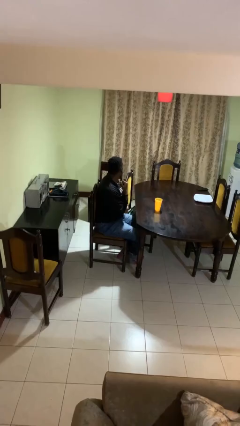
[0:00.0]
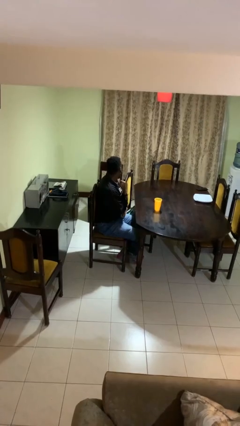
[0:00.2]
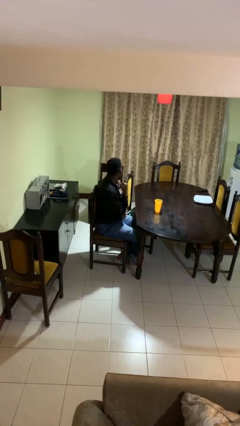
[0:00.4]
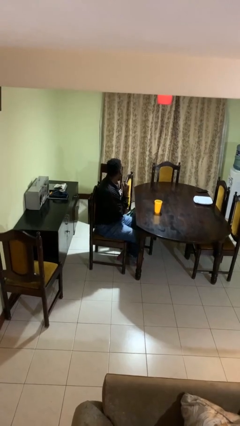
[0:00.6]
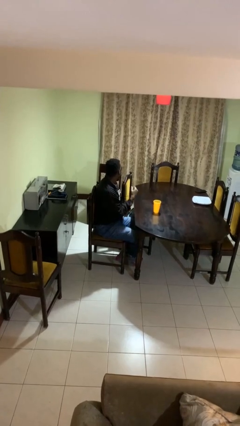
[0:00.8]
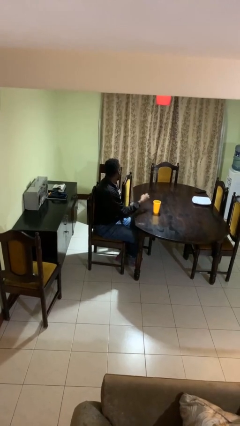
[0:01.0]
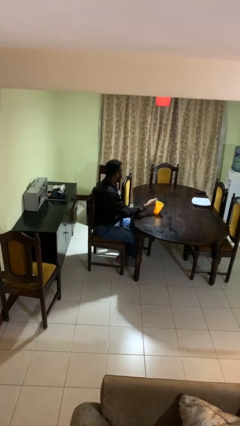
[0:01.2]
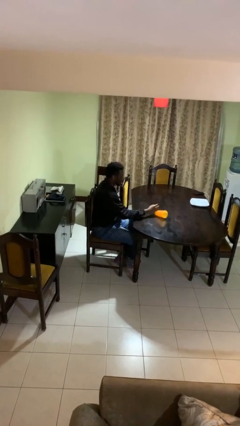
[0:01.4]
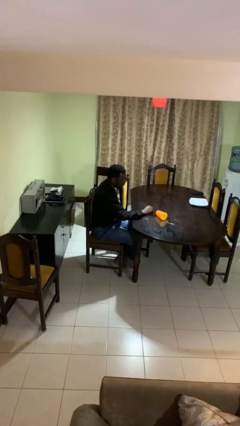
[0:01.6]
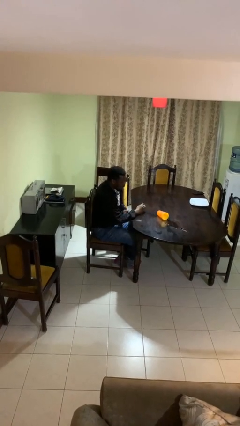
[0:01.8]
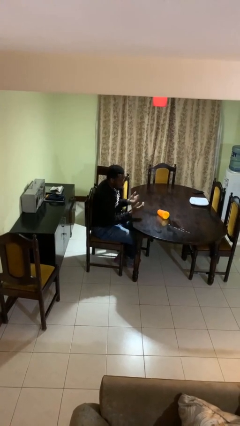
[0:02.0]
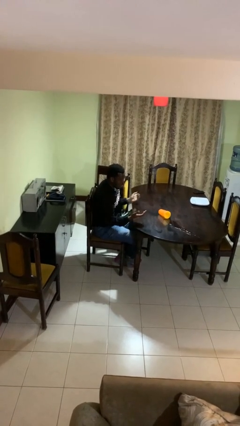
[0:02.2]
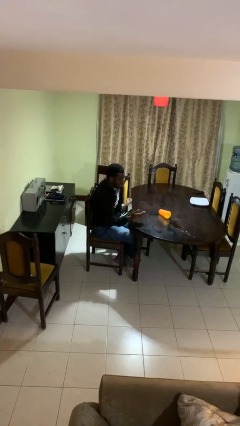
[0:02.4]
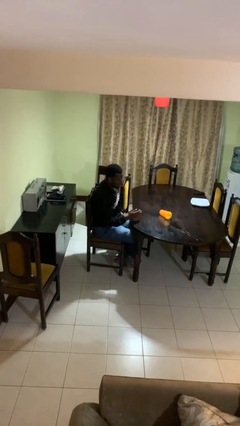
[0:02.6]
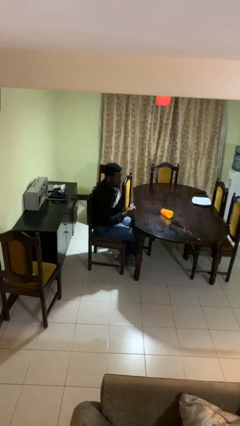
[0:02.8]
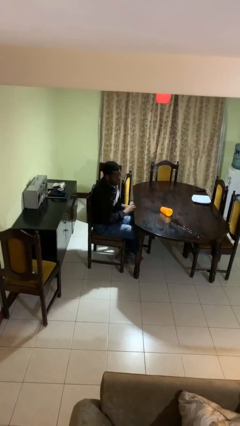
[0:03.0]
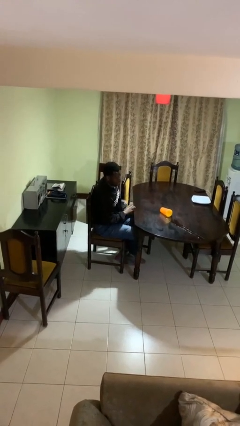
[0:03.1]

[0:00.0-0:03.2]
person spills on table

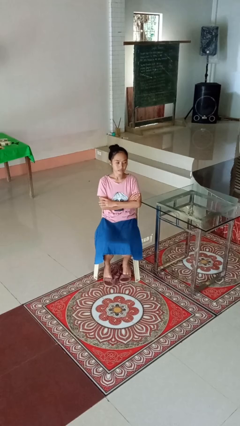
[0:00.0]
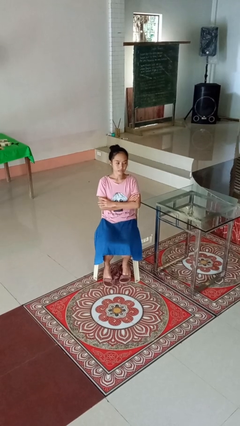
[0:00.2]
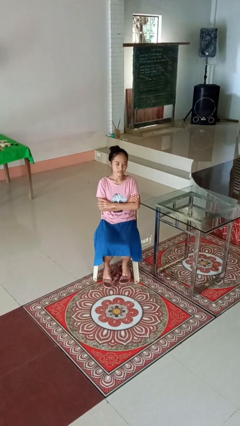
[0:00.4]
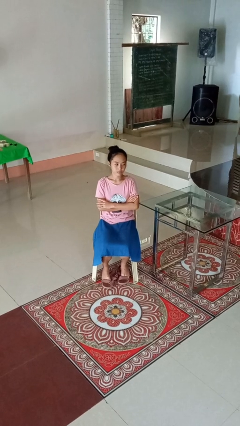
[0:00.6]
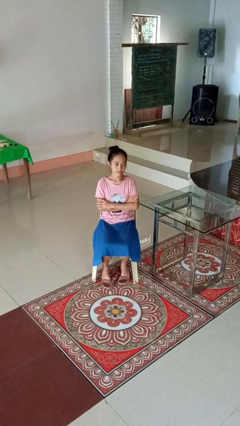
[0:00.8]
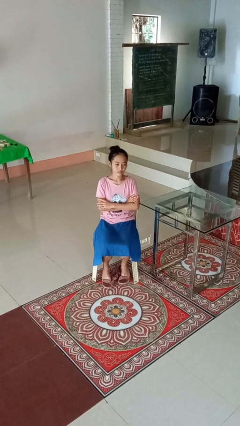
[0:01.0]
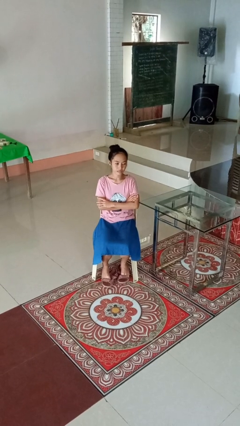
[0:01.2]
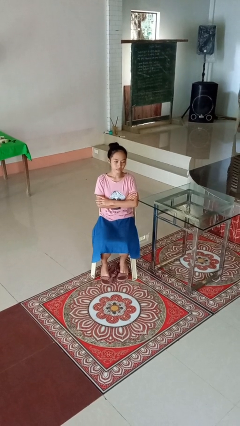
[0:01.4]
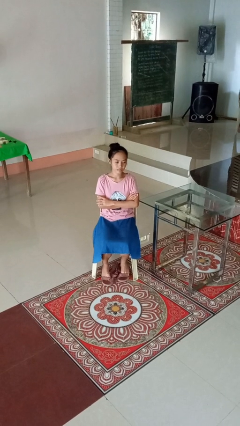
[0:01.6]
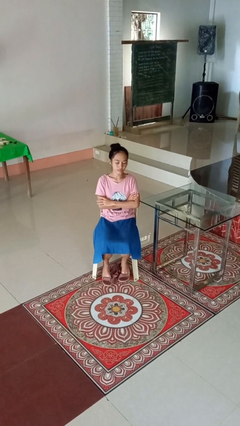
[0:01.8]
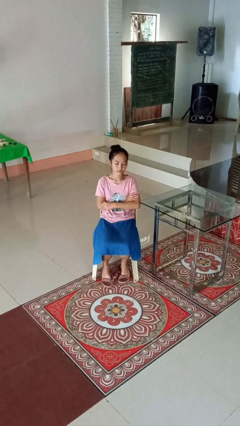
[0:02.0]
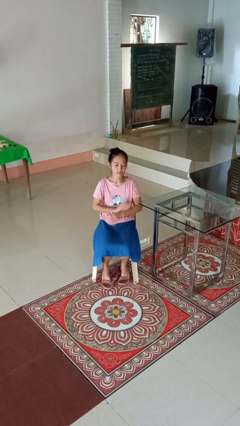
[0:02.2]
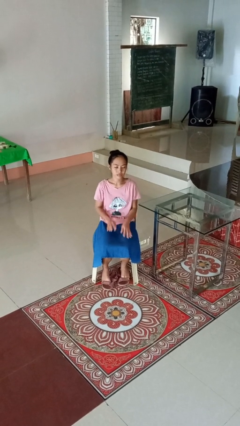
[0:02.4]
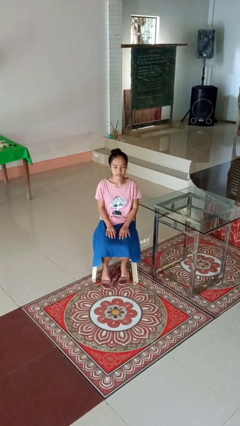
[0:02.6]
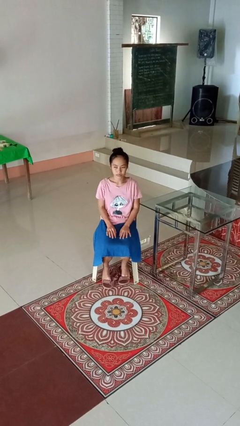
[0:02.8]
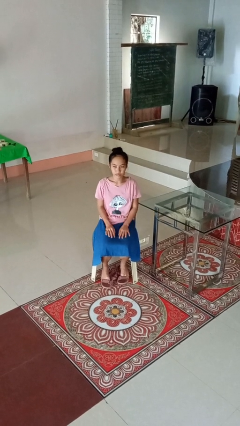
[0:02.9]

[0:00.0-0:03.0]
person crosses arms

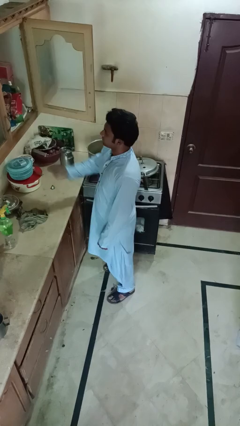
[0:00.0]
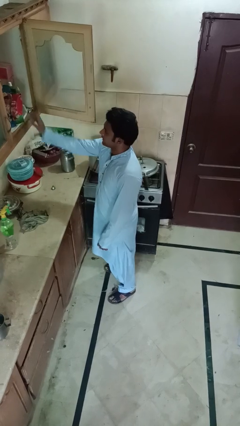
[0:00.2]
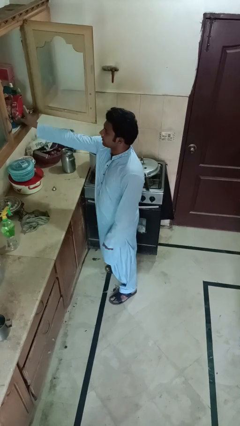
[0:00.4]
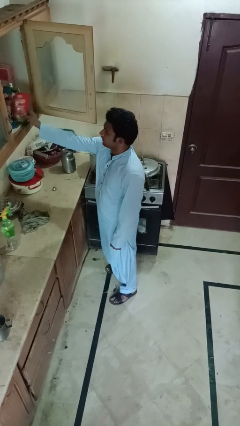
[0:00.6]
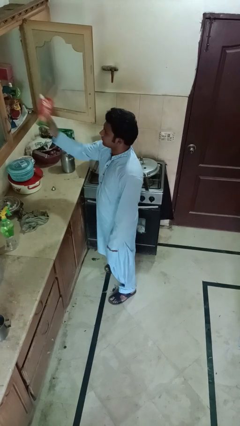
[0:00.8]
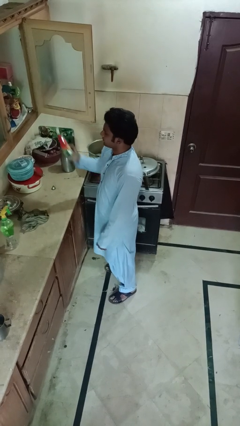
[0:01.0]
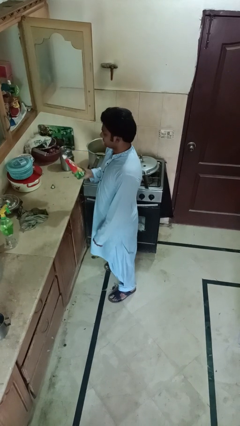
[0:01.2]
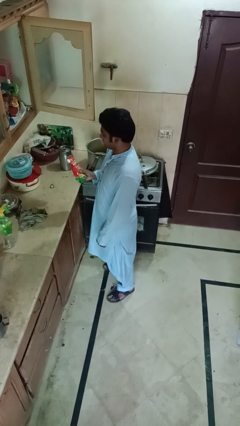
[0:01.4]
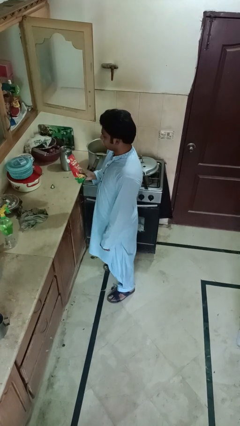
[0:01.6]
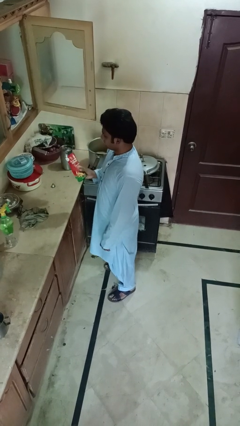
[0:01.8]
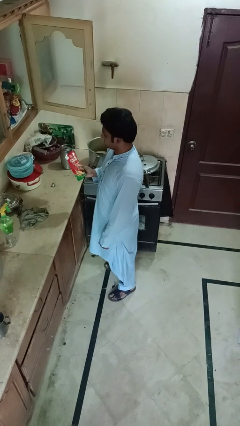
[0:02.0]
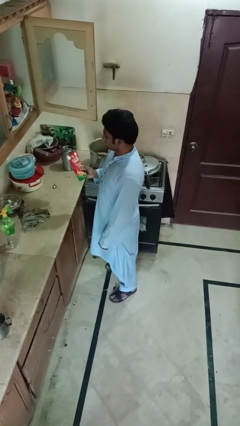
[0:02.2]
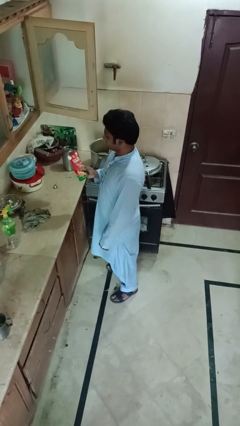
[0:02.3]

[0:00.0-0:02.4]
person picks up object from cabinet

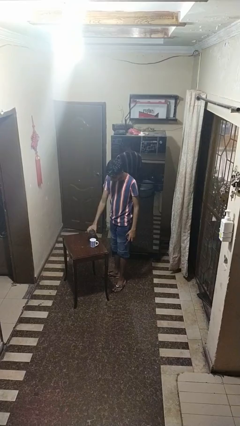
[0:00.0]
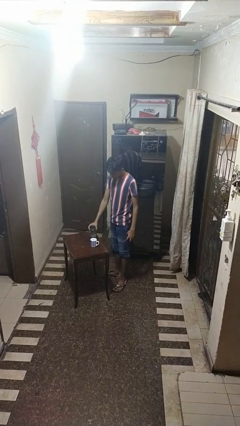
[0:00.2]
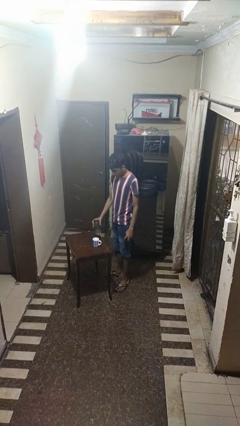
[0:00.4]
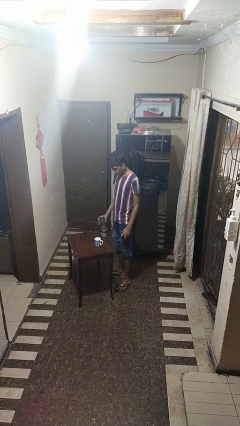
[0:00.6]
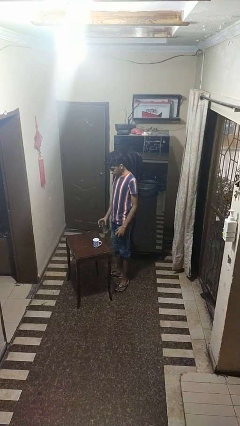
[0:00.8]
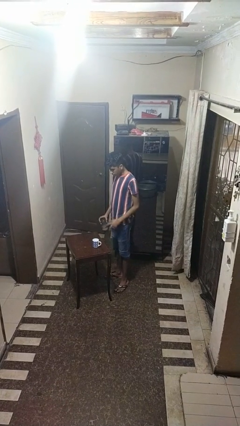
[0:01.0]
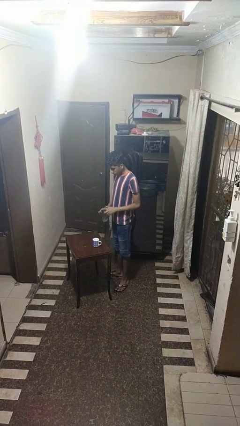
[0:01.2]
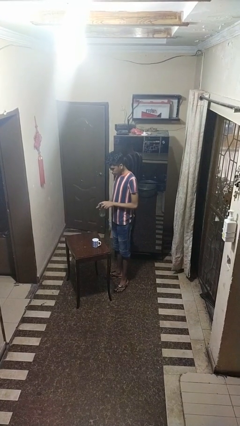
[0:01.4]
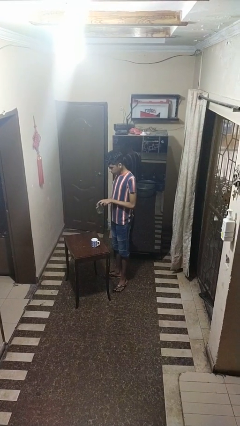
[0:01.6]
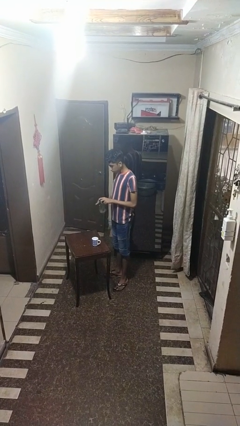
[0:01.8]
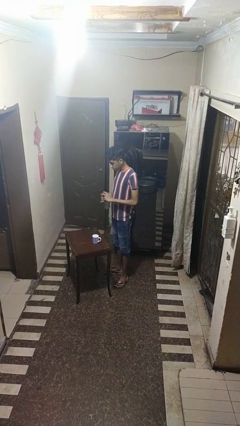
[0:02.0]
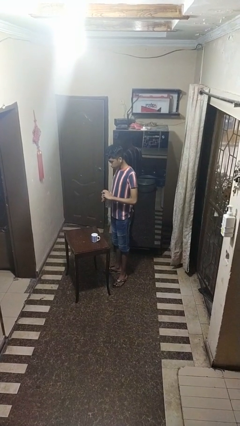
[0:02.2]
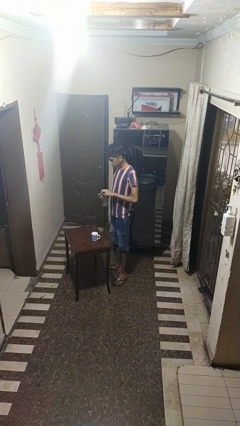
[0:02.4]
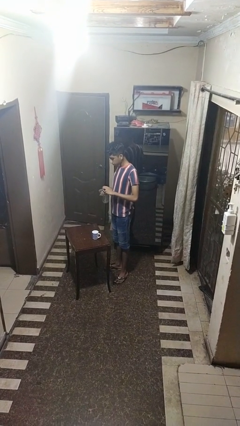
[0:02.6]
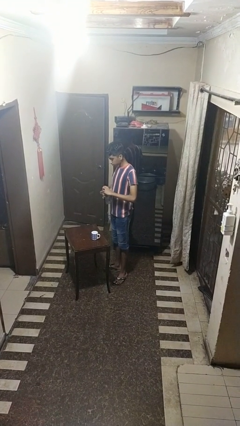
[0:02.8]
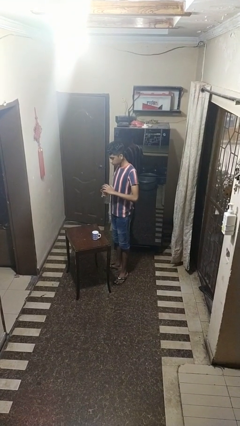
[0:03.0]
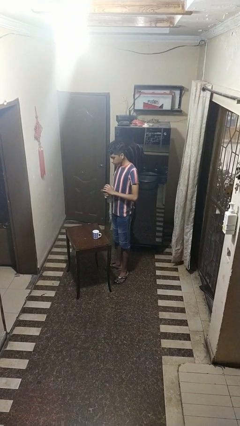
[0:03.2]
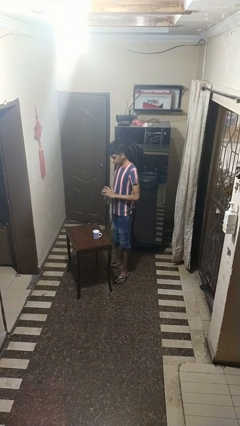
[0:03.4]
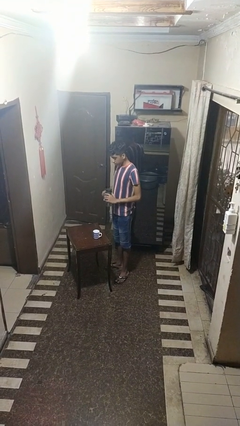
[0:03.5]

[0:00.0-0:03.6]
person screws lid to bottle

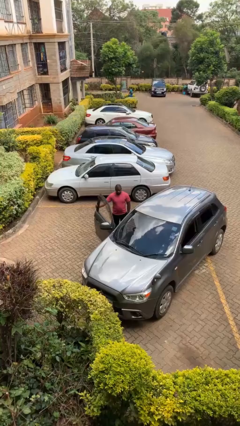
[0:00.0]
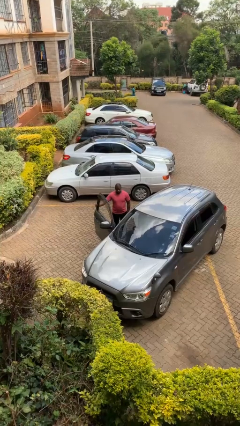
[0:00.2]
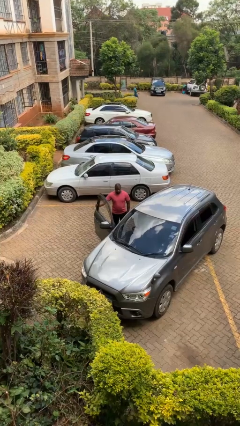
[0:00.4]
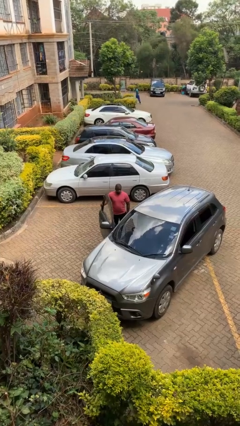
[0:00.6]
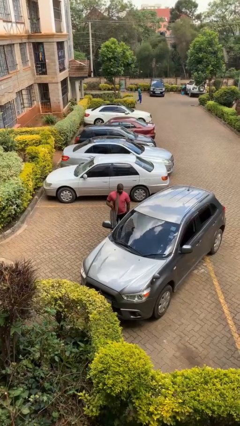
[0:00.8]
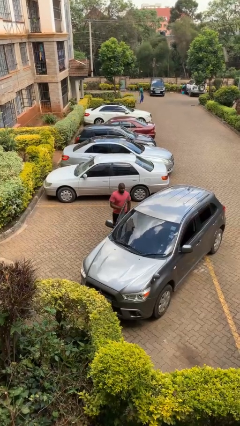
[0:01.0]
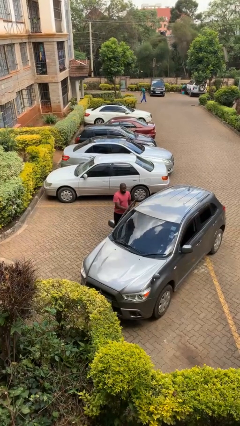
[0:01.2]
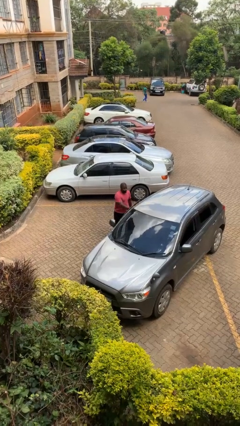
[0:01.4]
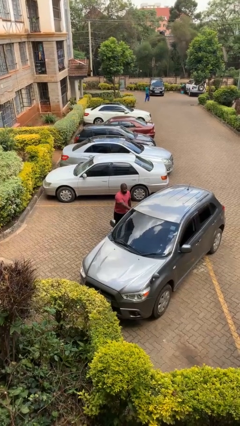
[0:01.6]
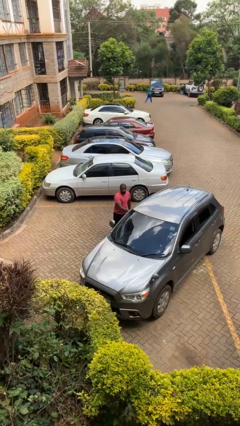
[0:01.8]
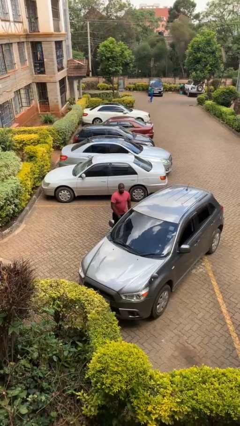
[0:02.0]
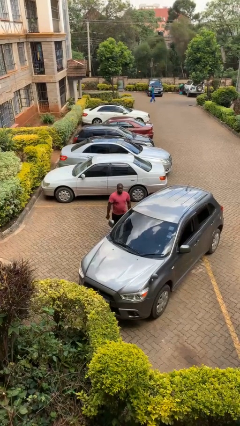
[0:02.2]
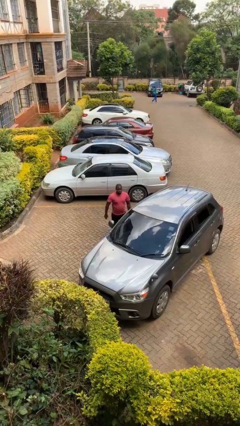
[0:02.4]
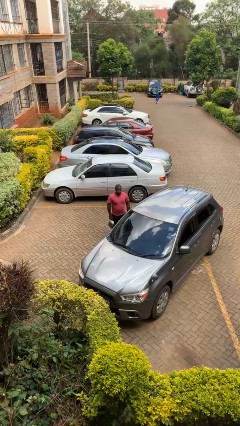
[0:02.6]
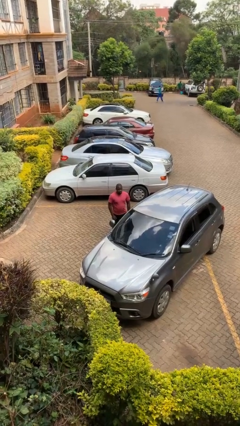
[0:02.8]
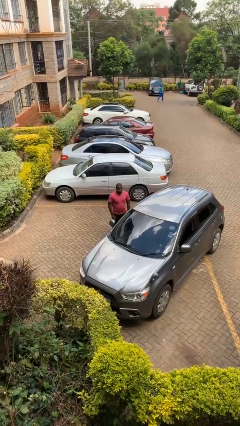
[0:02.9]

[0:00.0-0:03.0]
person closes car door

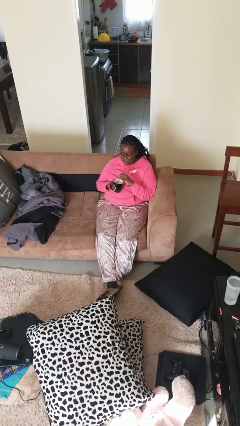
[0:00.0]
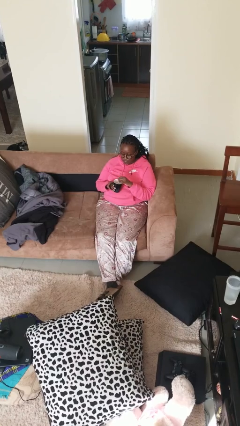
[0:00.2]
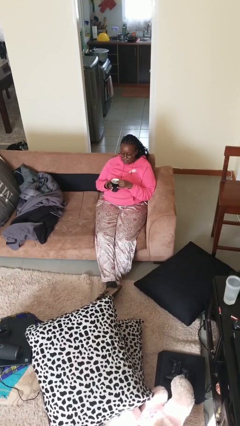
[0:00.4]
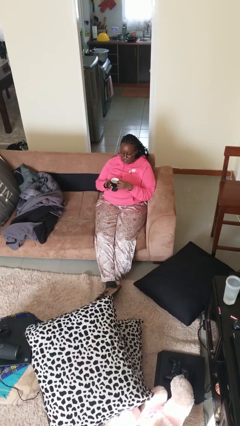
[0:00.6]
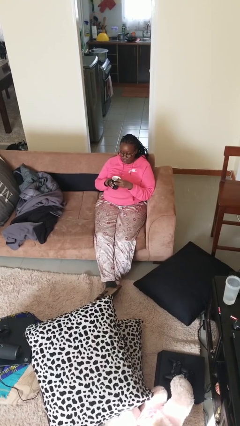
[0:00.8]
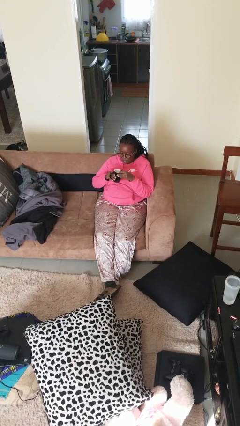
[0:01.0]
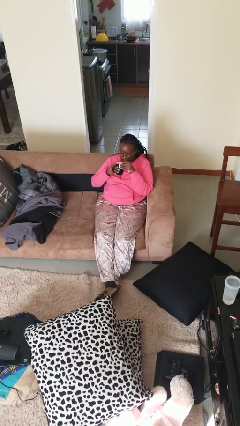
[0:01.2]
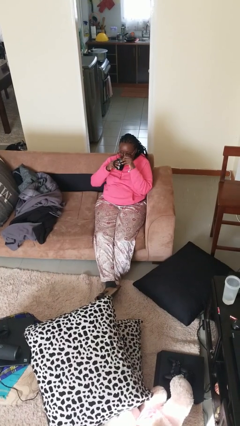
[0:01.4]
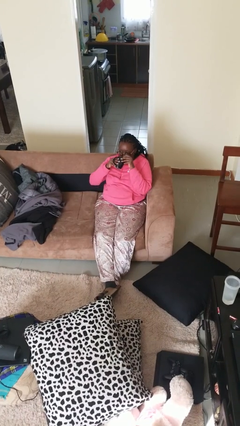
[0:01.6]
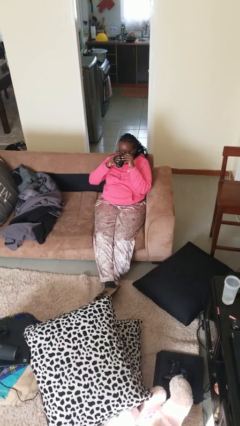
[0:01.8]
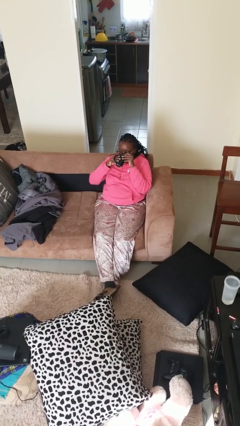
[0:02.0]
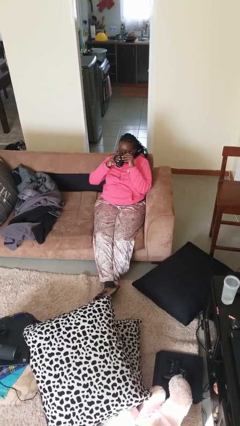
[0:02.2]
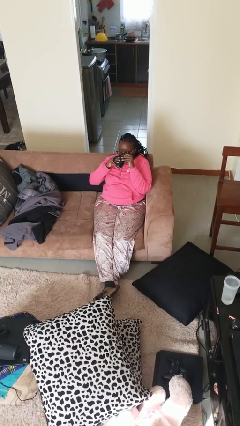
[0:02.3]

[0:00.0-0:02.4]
person drinks from mug
